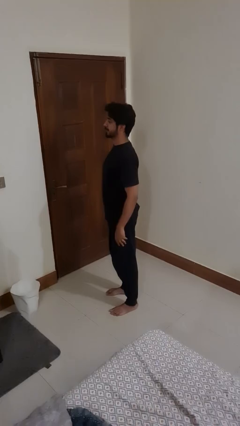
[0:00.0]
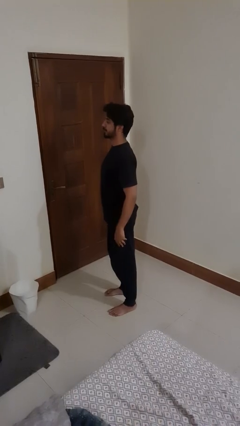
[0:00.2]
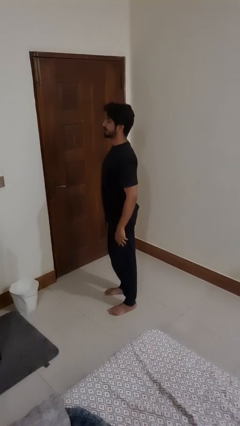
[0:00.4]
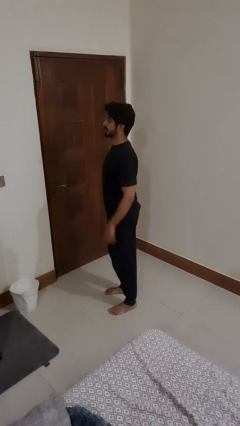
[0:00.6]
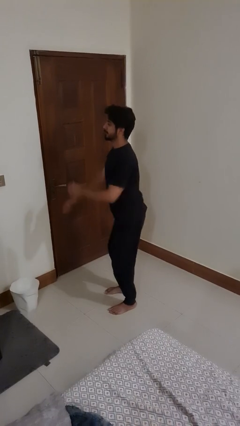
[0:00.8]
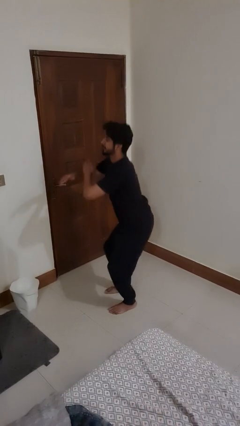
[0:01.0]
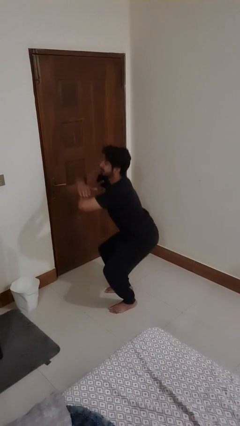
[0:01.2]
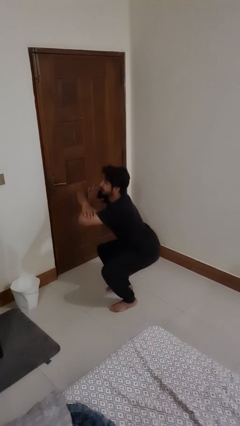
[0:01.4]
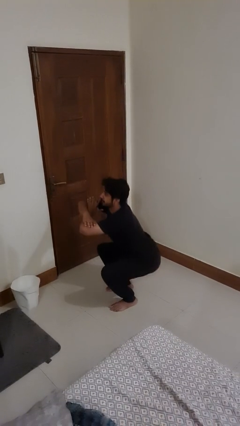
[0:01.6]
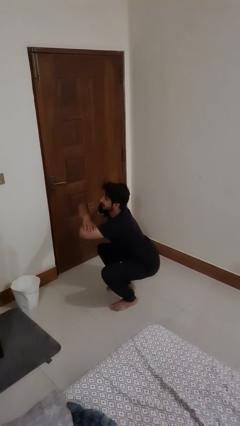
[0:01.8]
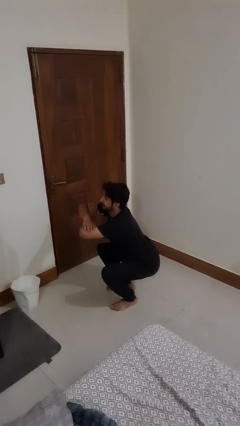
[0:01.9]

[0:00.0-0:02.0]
person squats

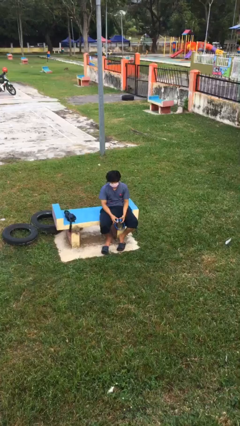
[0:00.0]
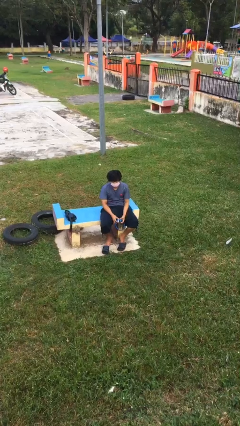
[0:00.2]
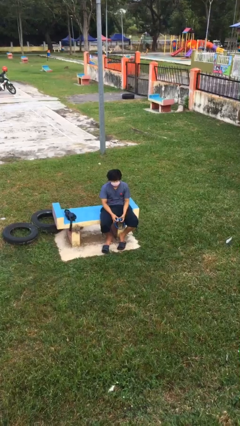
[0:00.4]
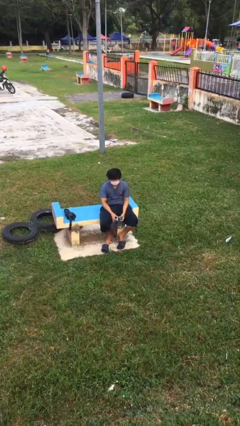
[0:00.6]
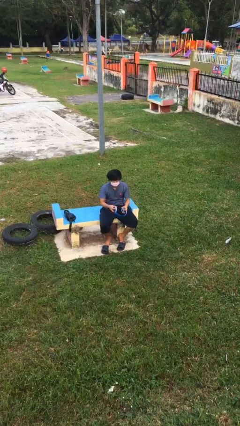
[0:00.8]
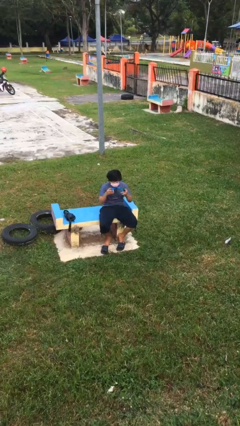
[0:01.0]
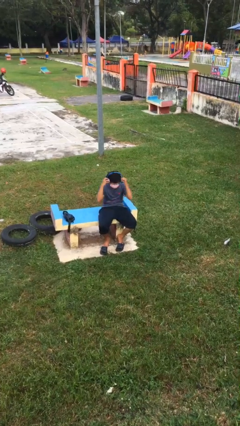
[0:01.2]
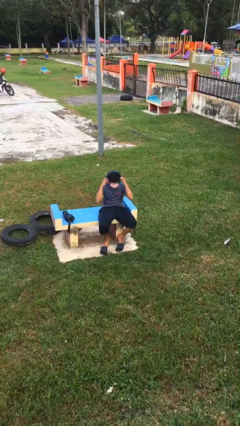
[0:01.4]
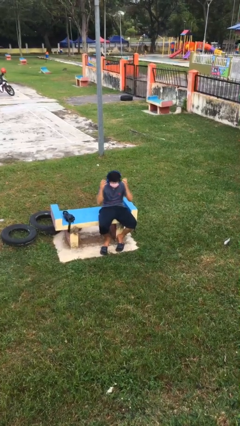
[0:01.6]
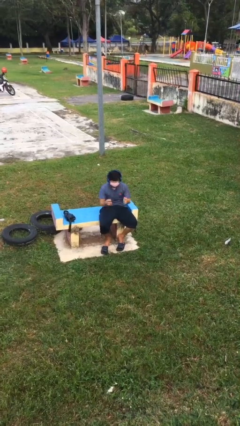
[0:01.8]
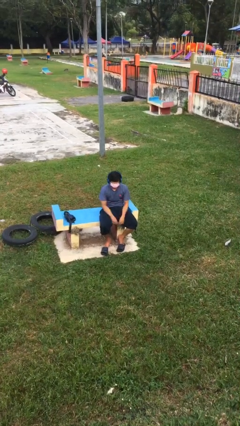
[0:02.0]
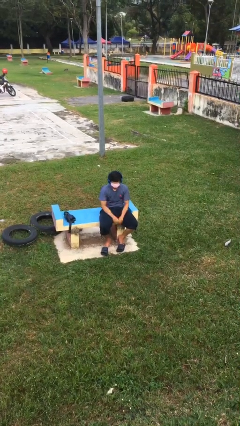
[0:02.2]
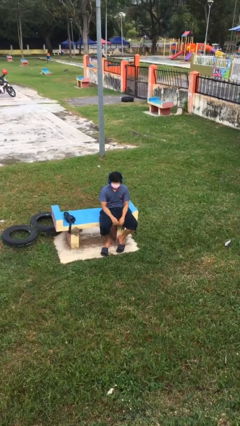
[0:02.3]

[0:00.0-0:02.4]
person puts on headphones

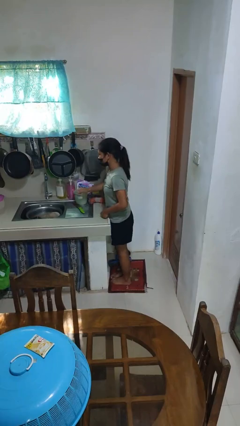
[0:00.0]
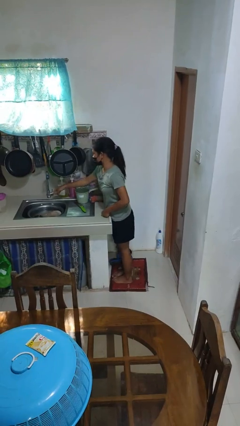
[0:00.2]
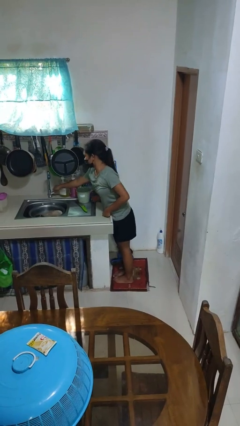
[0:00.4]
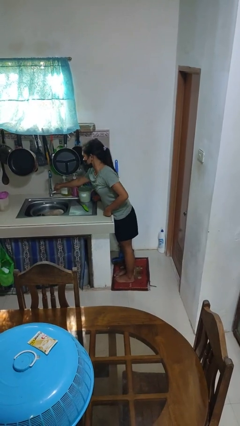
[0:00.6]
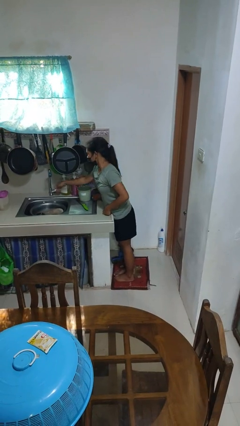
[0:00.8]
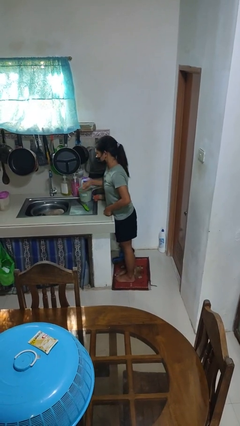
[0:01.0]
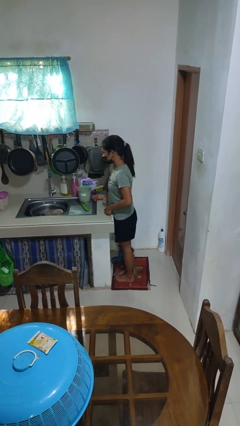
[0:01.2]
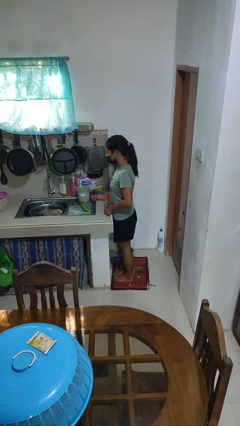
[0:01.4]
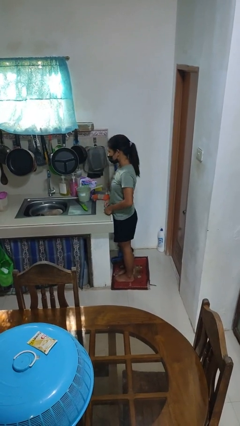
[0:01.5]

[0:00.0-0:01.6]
person turns off faucet

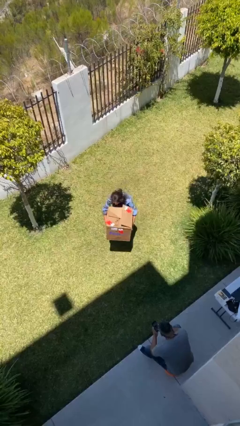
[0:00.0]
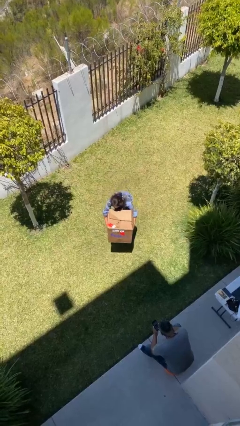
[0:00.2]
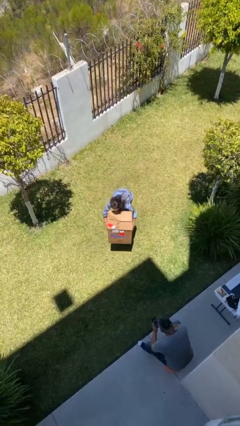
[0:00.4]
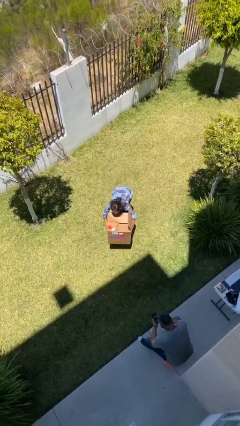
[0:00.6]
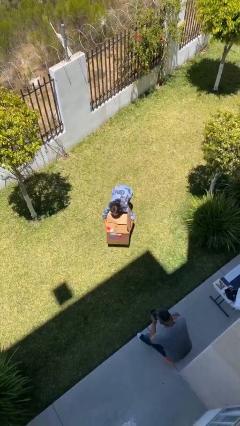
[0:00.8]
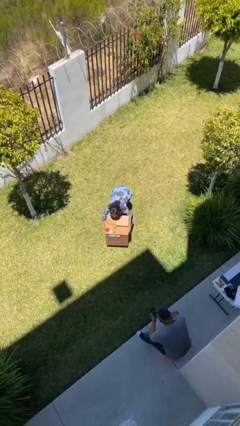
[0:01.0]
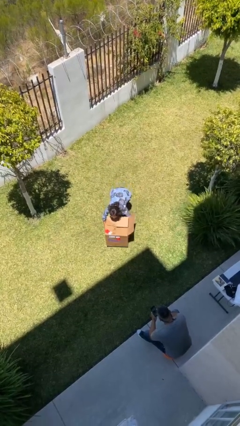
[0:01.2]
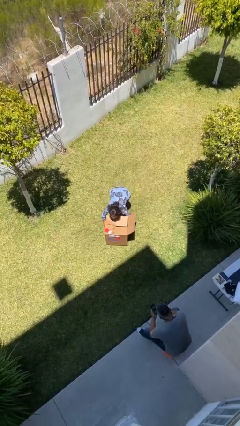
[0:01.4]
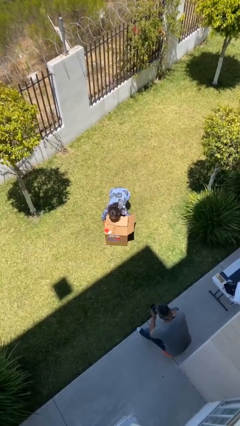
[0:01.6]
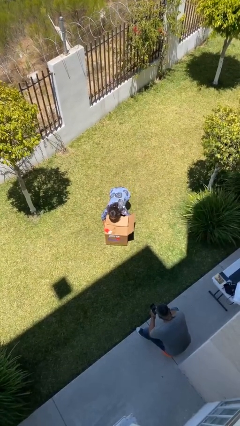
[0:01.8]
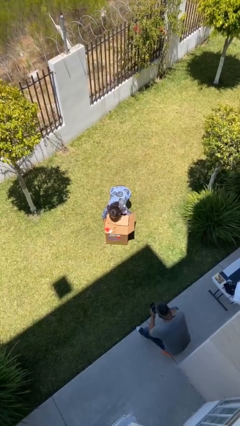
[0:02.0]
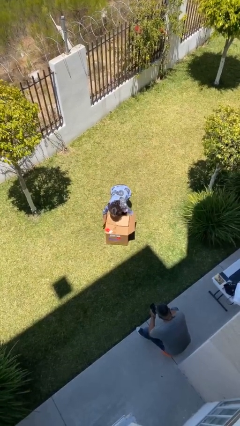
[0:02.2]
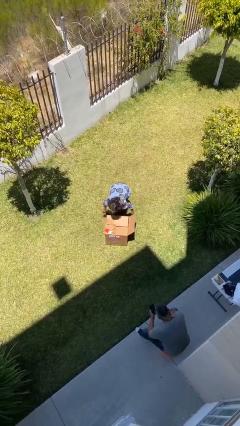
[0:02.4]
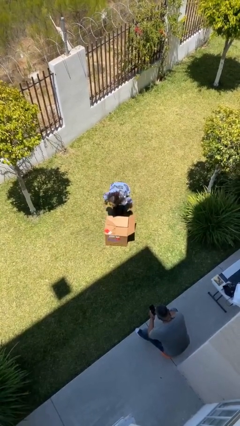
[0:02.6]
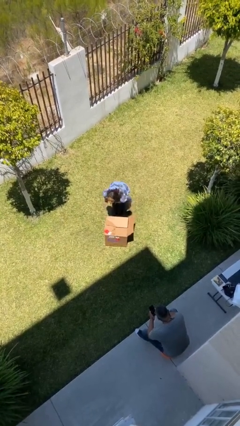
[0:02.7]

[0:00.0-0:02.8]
person puts down object on floor

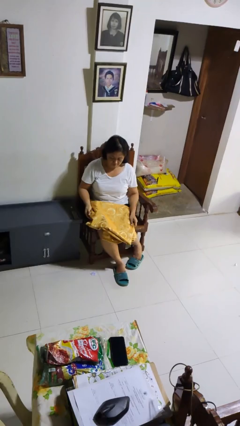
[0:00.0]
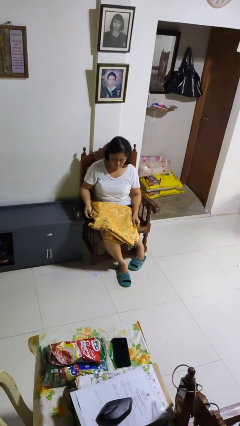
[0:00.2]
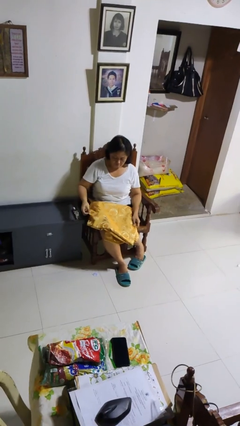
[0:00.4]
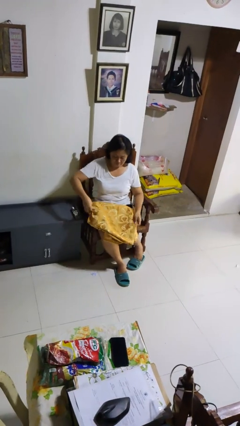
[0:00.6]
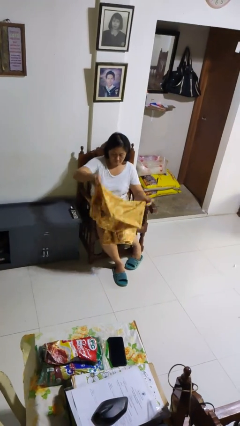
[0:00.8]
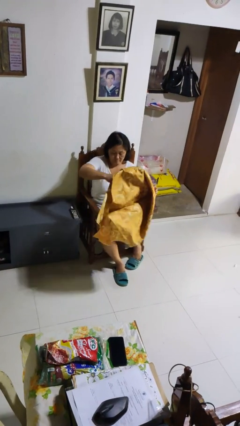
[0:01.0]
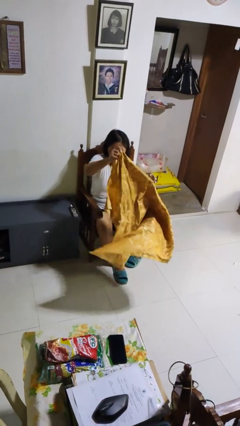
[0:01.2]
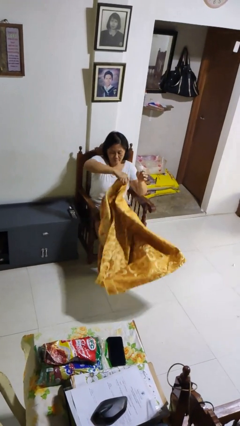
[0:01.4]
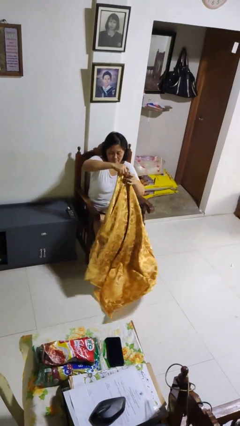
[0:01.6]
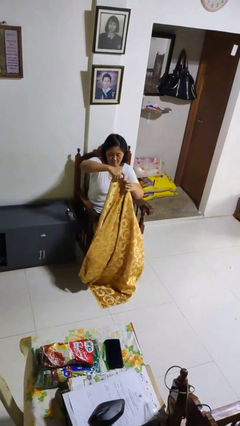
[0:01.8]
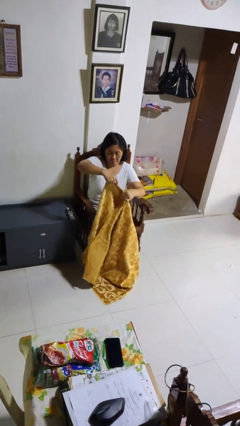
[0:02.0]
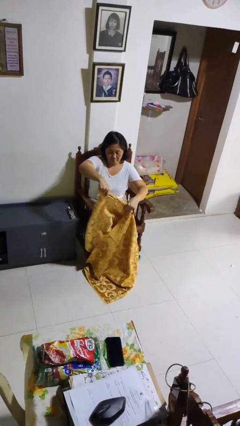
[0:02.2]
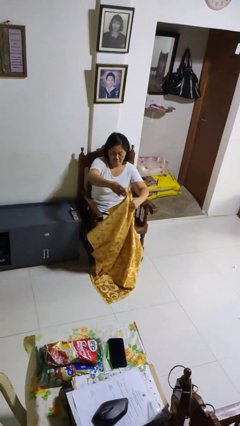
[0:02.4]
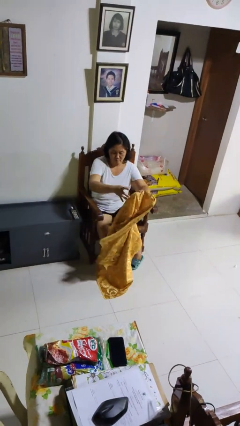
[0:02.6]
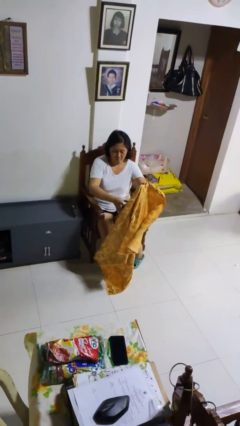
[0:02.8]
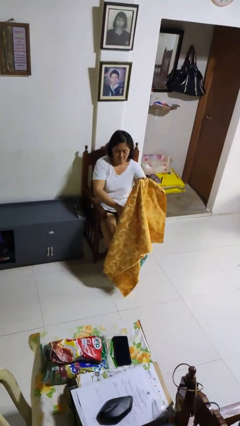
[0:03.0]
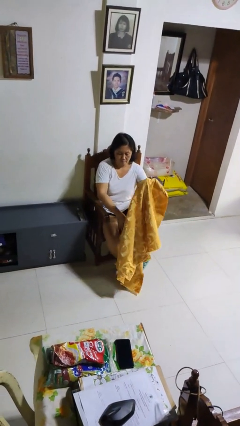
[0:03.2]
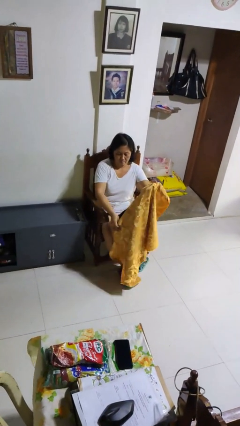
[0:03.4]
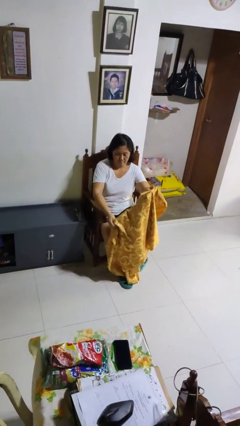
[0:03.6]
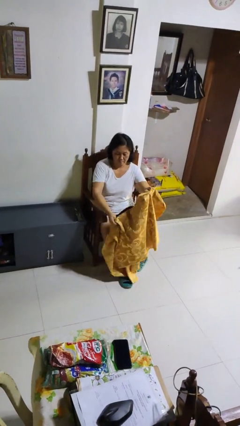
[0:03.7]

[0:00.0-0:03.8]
person unfolds blanket

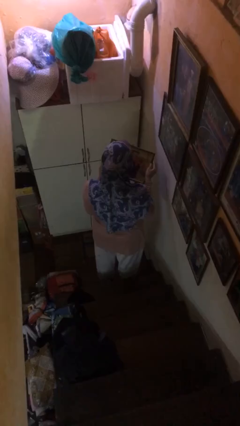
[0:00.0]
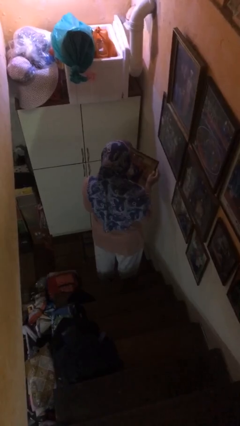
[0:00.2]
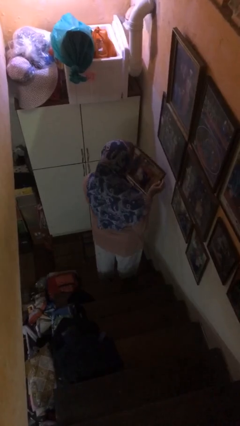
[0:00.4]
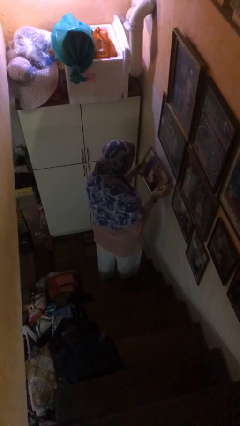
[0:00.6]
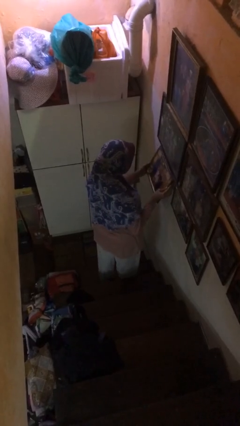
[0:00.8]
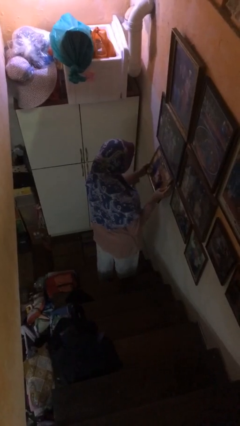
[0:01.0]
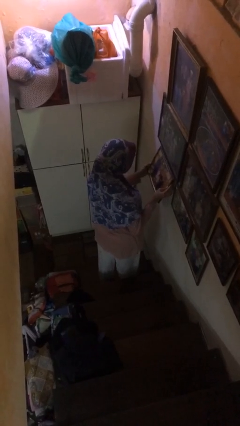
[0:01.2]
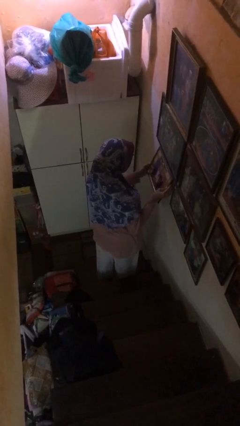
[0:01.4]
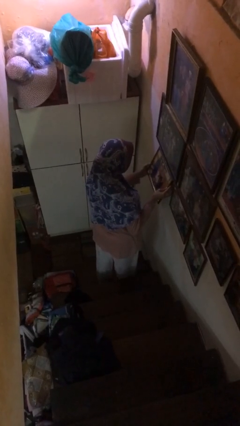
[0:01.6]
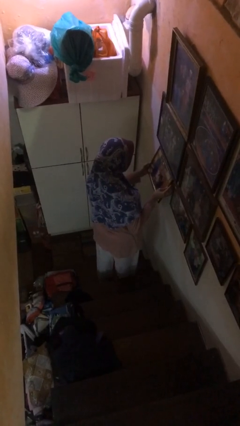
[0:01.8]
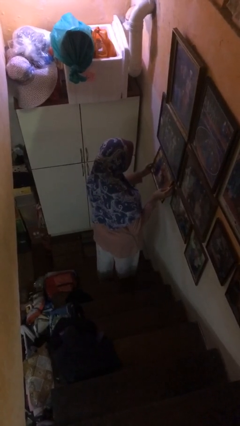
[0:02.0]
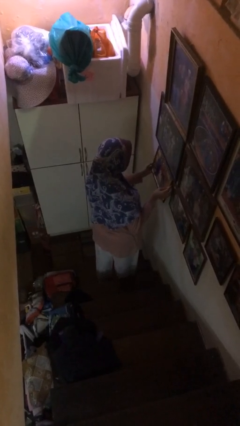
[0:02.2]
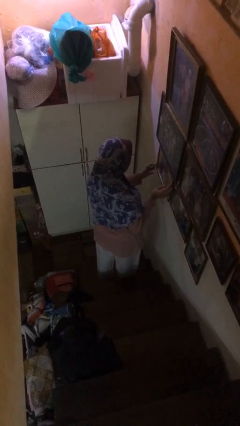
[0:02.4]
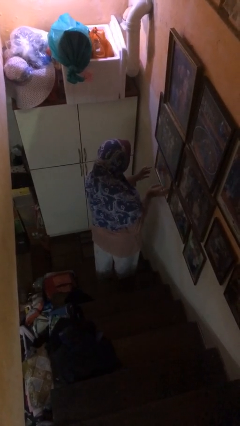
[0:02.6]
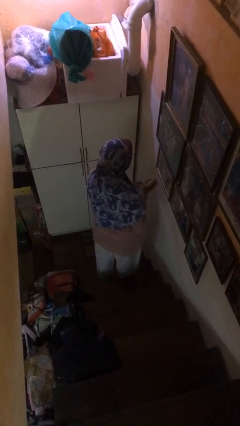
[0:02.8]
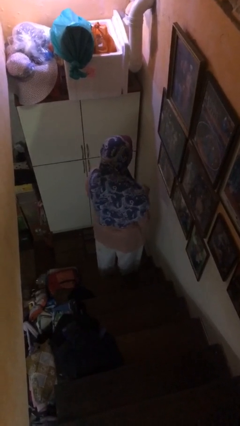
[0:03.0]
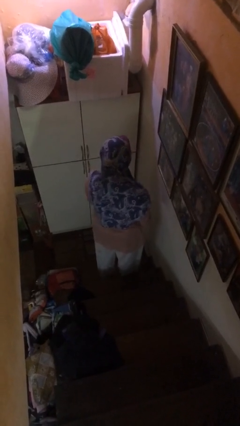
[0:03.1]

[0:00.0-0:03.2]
person takes down picture frame

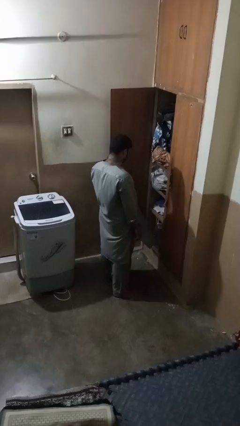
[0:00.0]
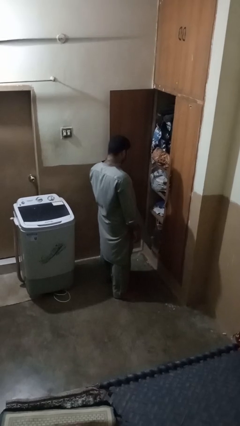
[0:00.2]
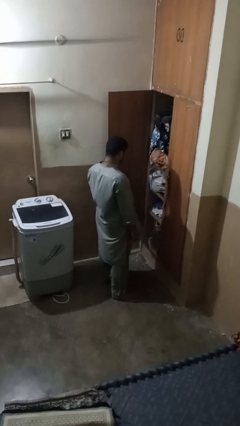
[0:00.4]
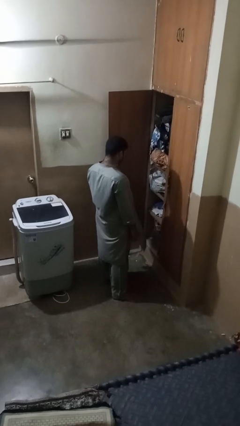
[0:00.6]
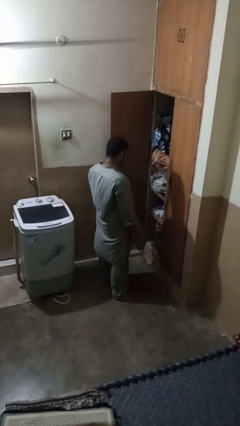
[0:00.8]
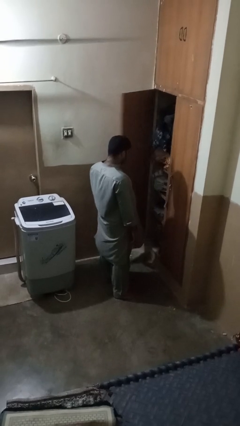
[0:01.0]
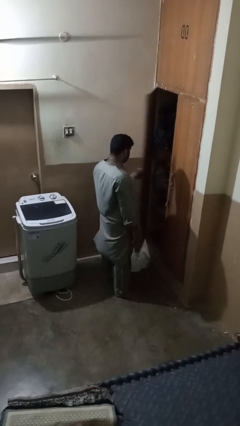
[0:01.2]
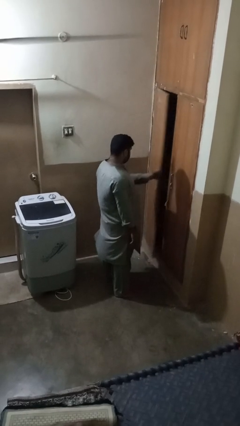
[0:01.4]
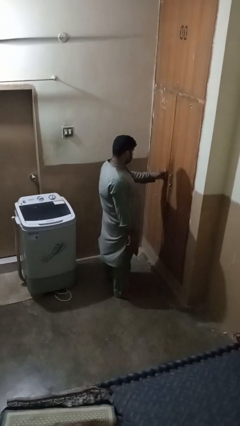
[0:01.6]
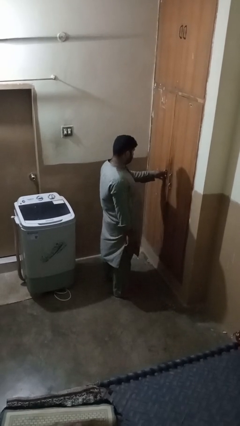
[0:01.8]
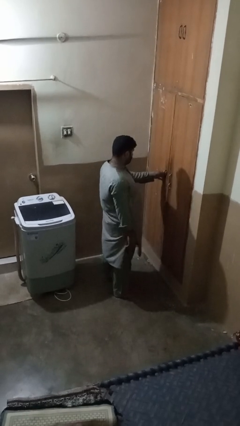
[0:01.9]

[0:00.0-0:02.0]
person closes closet door
